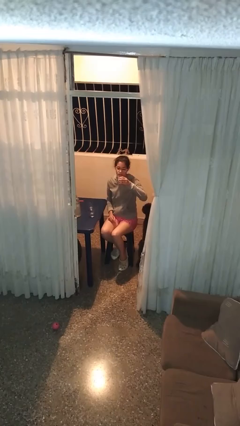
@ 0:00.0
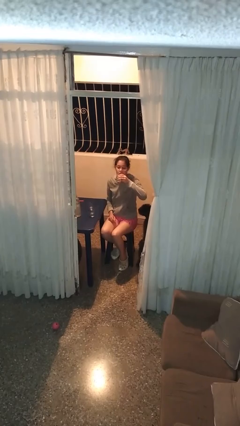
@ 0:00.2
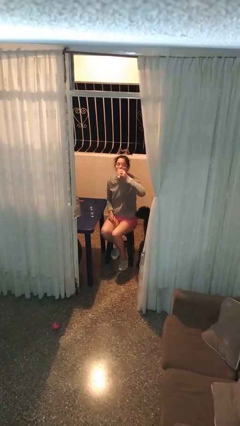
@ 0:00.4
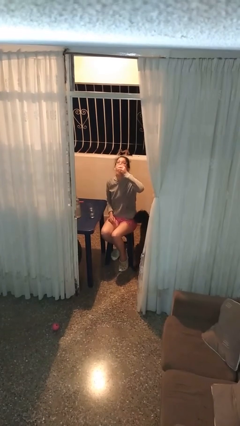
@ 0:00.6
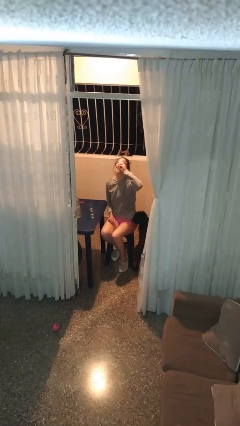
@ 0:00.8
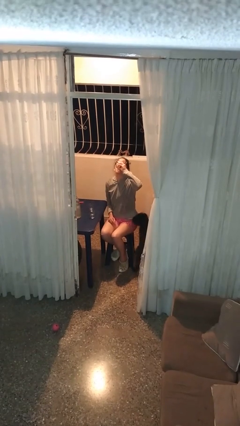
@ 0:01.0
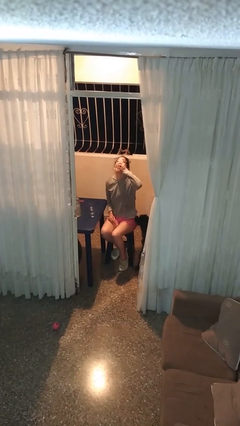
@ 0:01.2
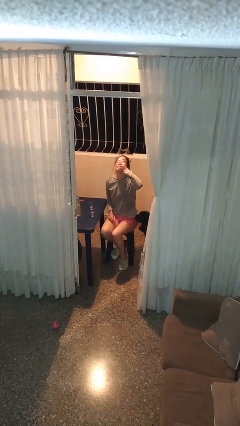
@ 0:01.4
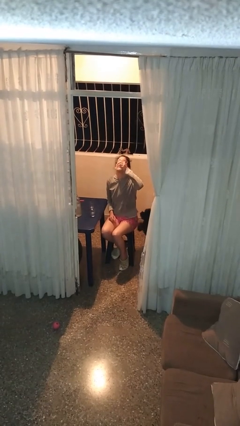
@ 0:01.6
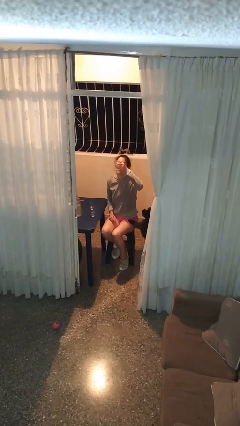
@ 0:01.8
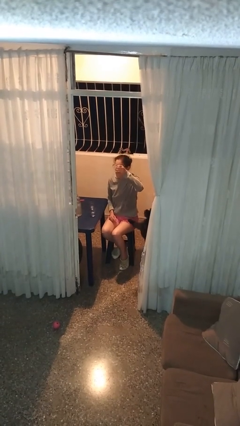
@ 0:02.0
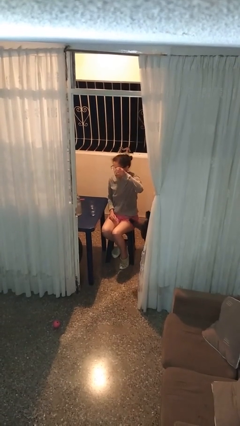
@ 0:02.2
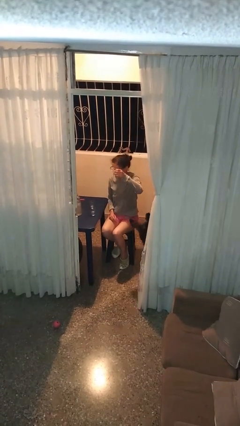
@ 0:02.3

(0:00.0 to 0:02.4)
person drinks from shotglass

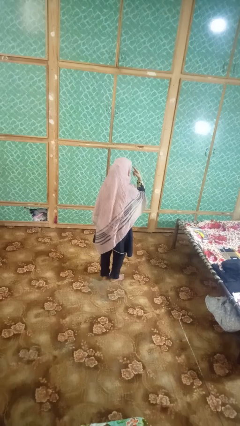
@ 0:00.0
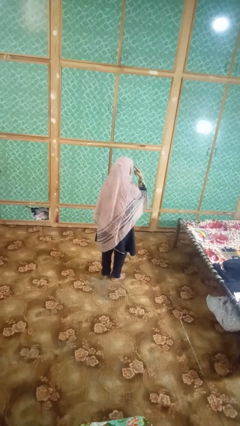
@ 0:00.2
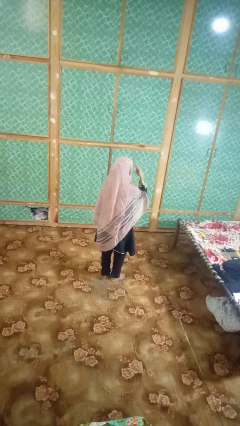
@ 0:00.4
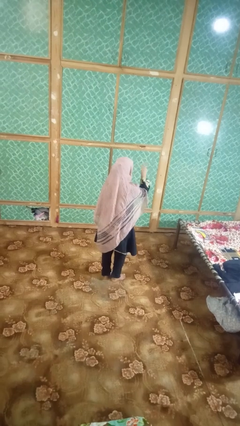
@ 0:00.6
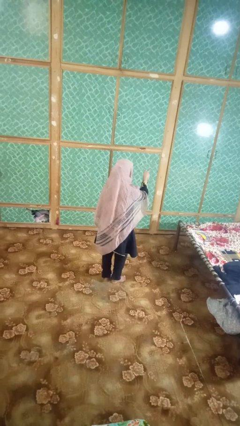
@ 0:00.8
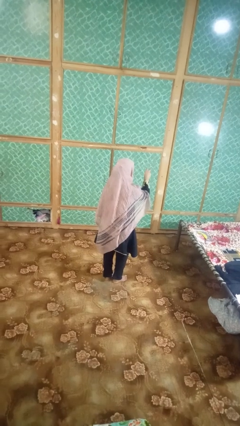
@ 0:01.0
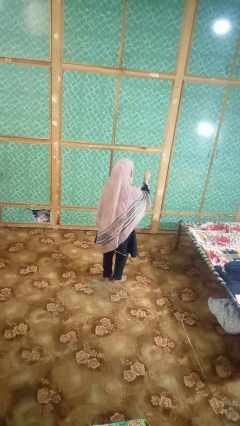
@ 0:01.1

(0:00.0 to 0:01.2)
person gestures behind me

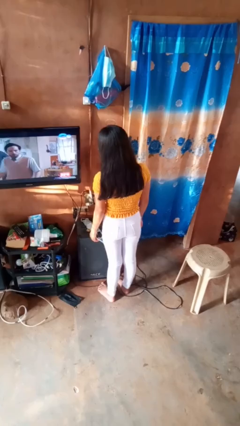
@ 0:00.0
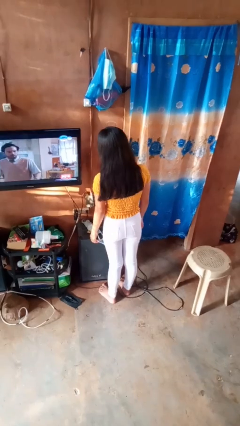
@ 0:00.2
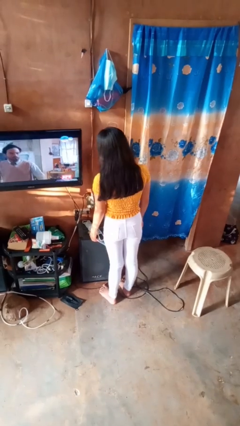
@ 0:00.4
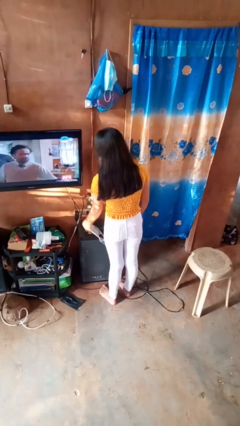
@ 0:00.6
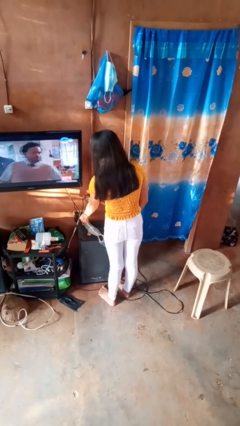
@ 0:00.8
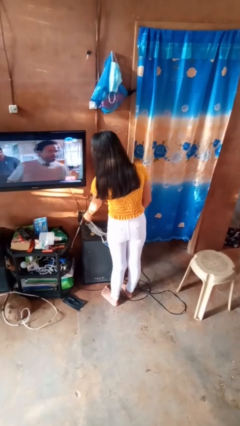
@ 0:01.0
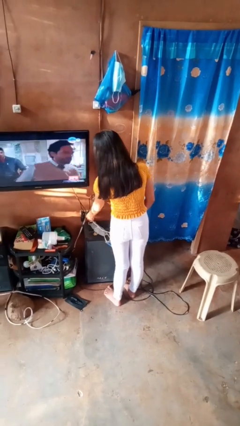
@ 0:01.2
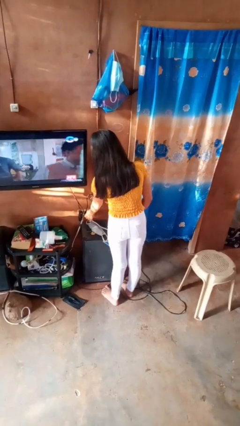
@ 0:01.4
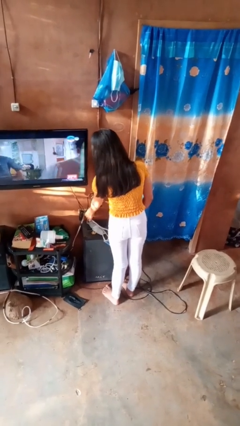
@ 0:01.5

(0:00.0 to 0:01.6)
person plugs into electrical socket

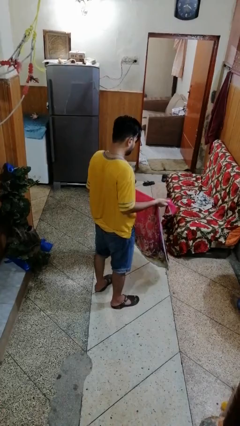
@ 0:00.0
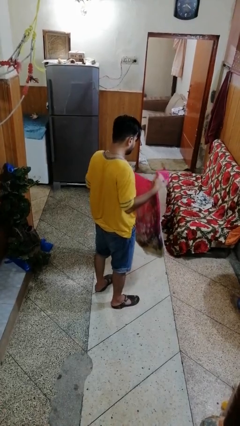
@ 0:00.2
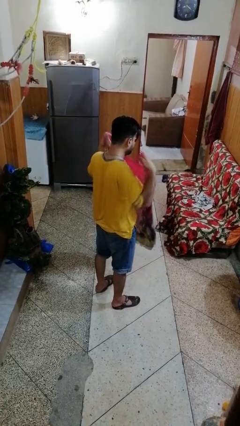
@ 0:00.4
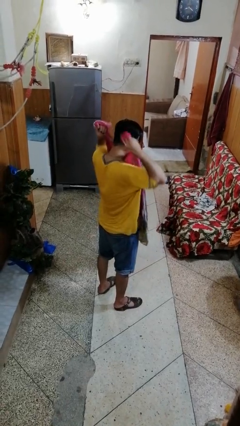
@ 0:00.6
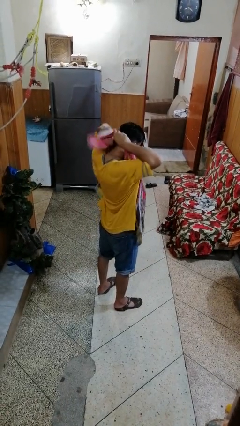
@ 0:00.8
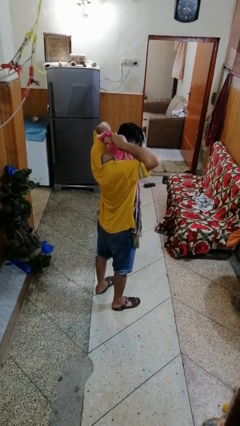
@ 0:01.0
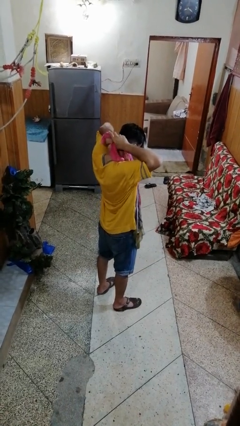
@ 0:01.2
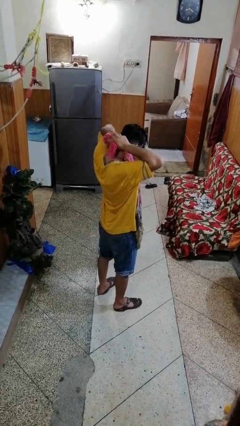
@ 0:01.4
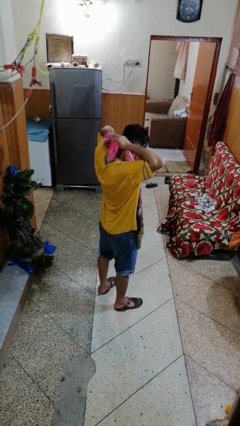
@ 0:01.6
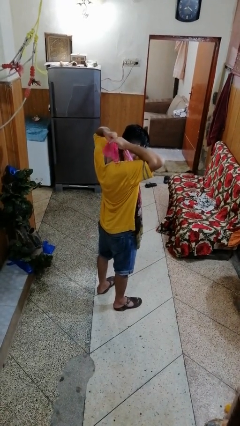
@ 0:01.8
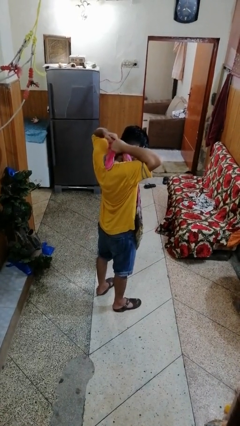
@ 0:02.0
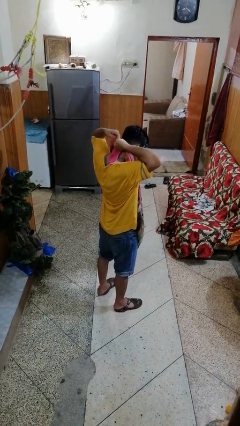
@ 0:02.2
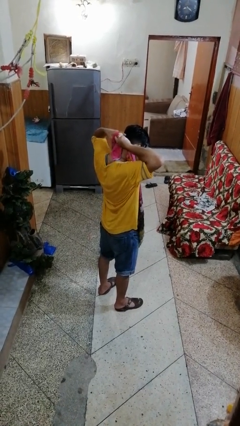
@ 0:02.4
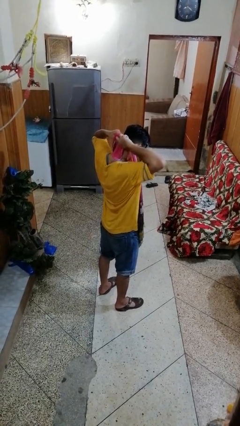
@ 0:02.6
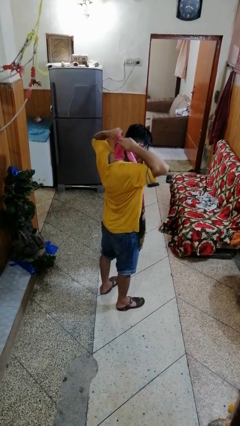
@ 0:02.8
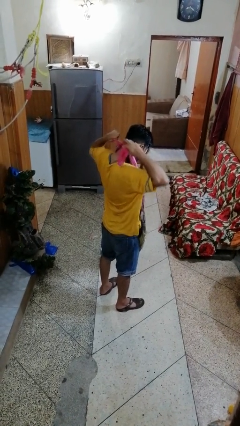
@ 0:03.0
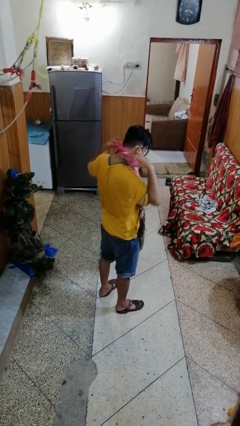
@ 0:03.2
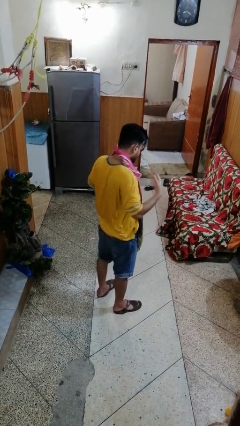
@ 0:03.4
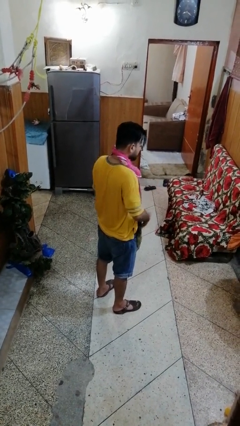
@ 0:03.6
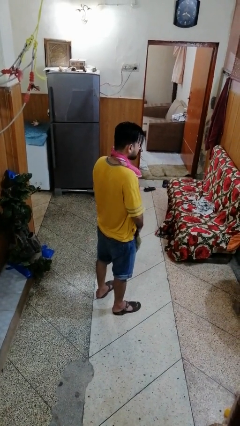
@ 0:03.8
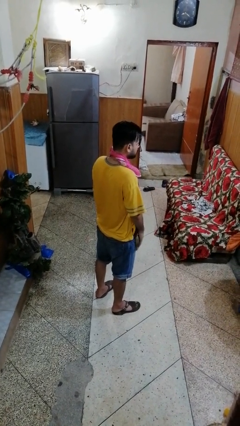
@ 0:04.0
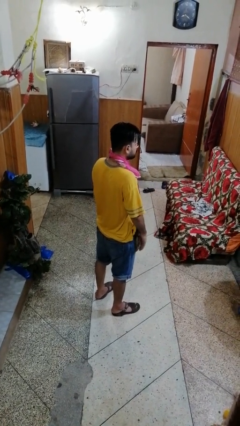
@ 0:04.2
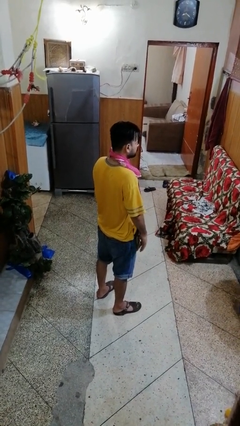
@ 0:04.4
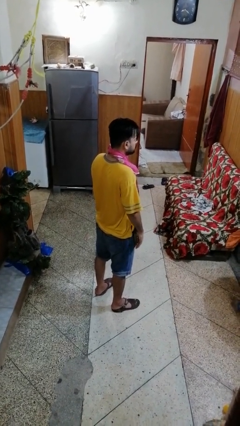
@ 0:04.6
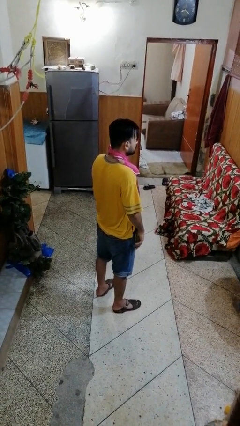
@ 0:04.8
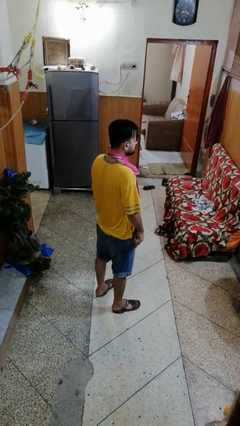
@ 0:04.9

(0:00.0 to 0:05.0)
person puts on apron

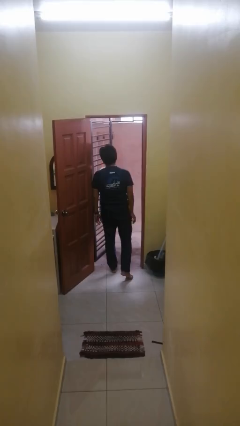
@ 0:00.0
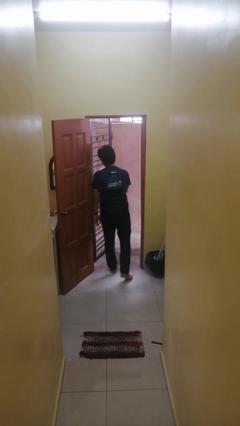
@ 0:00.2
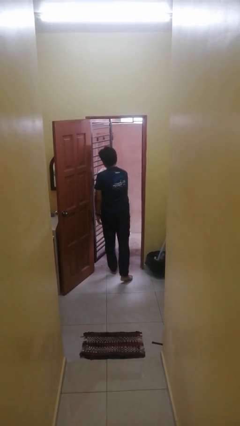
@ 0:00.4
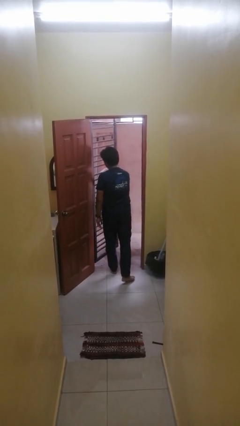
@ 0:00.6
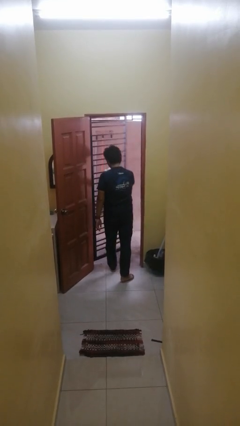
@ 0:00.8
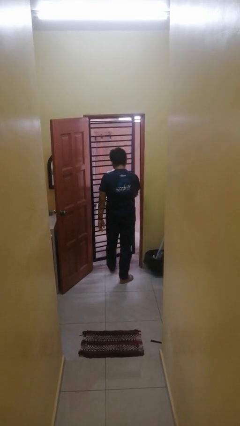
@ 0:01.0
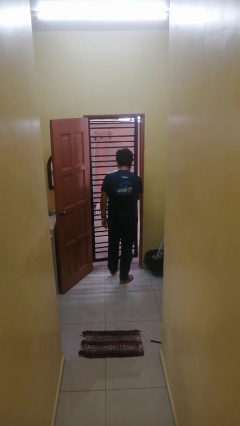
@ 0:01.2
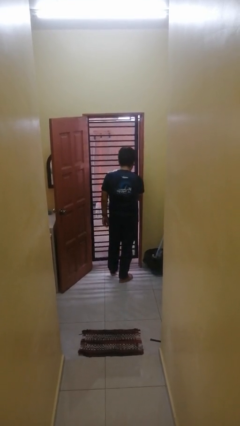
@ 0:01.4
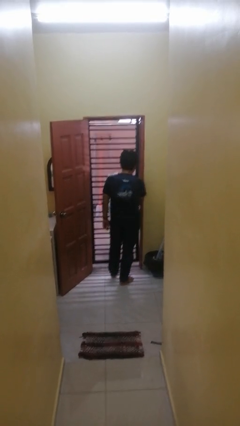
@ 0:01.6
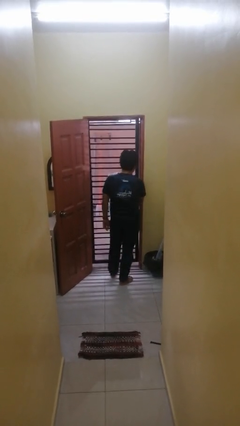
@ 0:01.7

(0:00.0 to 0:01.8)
person closes gate

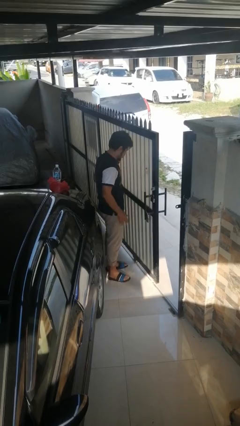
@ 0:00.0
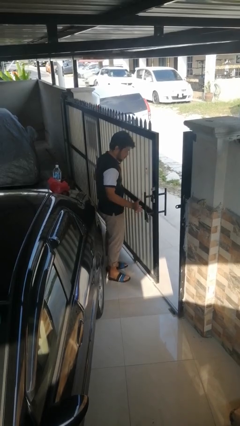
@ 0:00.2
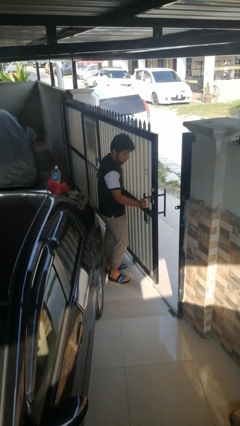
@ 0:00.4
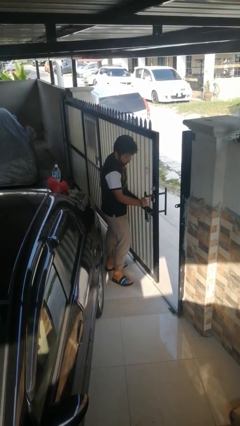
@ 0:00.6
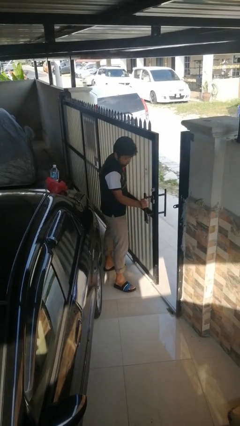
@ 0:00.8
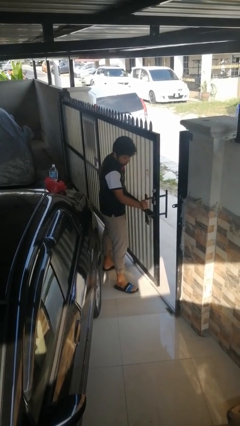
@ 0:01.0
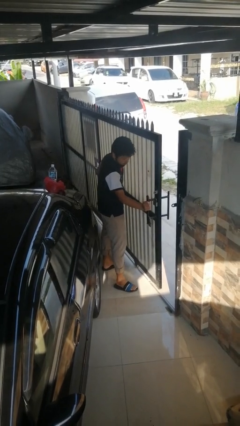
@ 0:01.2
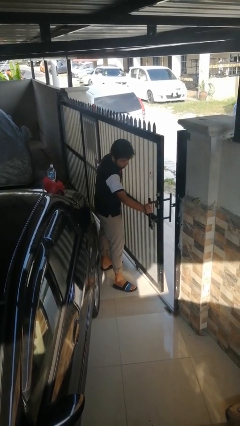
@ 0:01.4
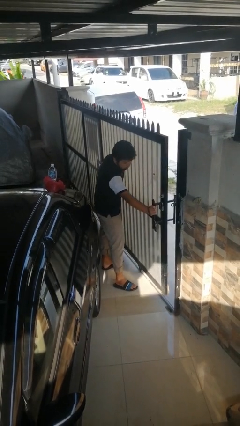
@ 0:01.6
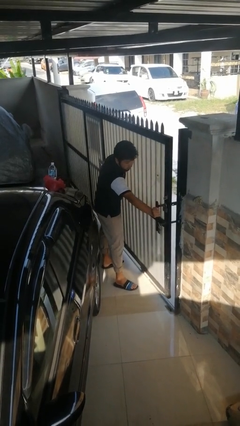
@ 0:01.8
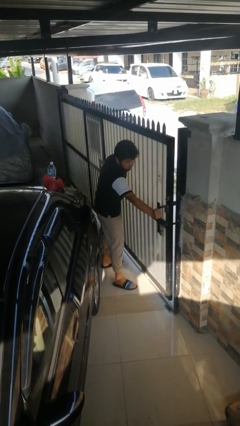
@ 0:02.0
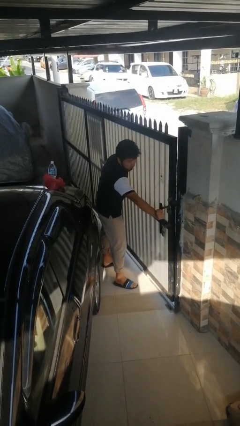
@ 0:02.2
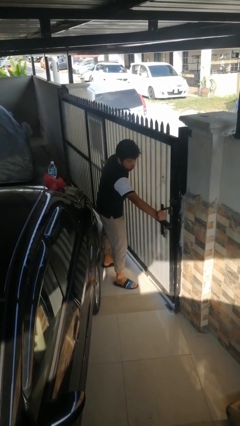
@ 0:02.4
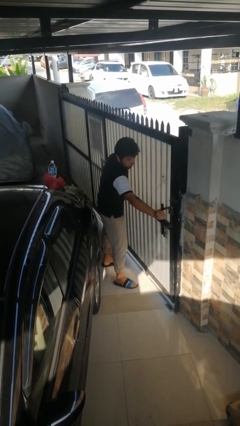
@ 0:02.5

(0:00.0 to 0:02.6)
person closes sliding door

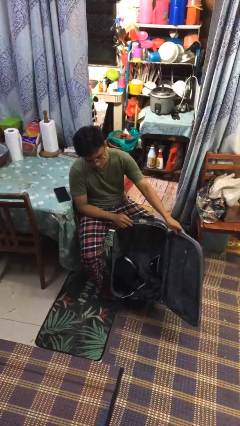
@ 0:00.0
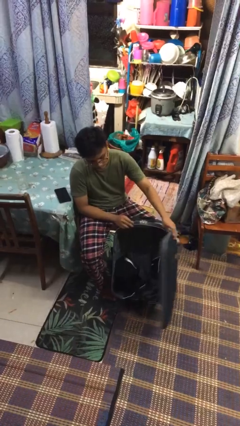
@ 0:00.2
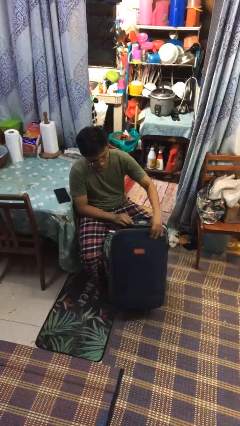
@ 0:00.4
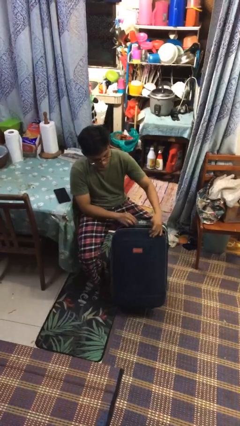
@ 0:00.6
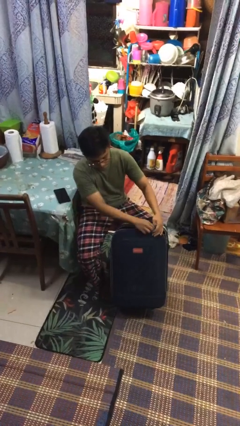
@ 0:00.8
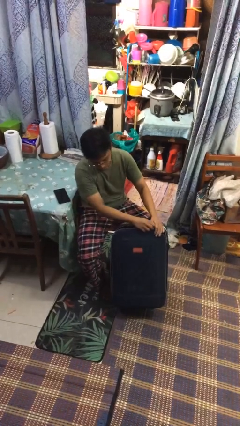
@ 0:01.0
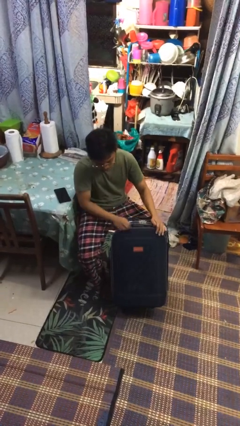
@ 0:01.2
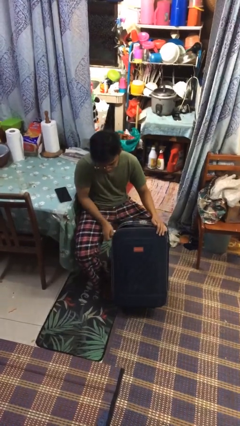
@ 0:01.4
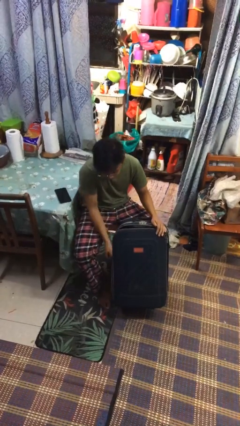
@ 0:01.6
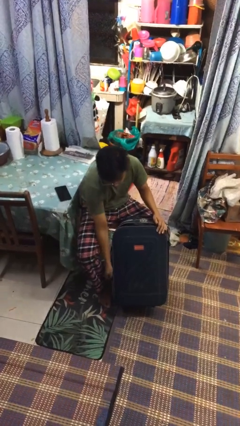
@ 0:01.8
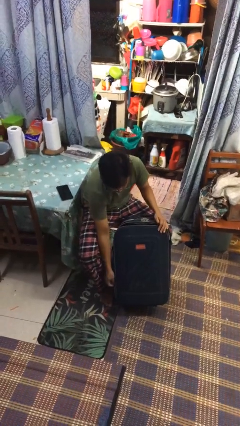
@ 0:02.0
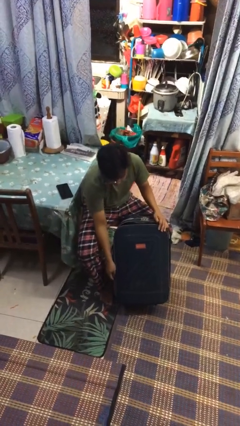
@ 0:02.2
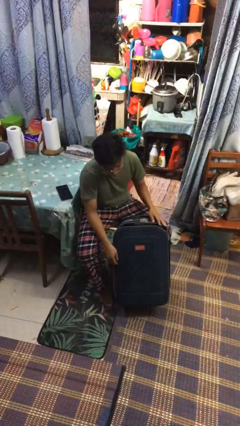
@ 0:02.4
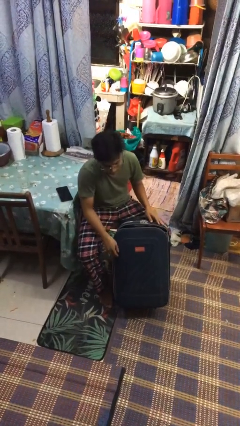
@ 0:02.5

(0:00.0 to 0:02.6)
person closes suitcase

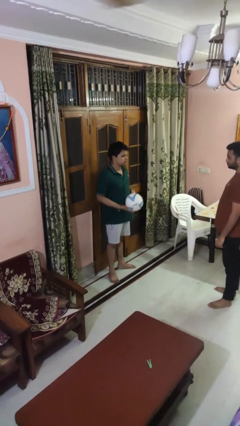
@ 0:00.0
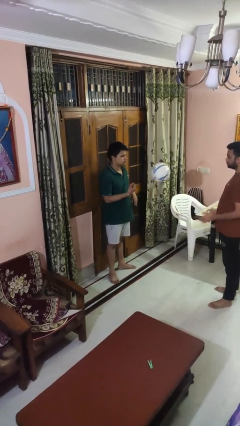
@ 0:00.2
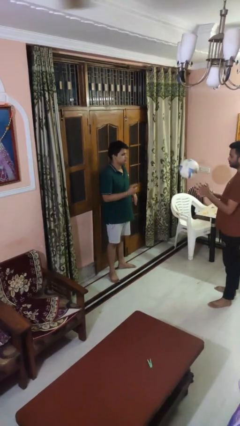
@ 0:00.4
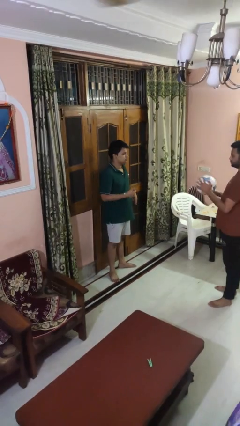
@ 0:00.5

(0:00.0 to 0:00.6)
person throws object to person
